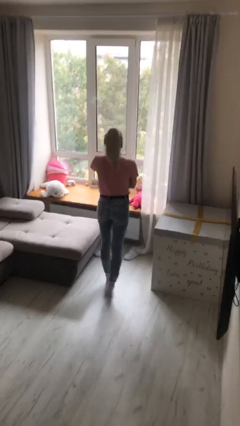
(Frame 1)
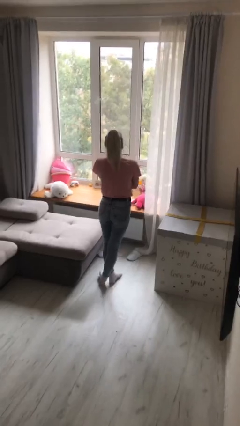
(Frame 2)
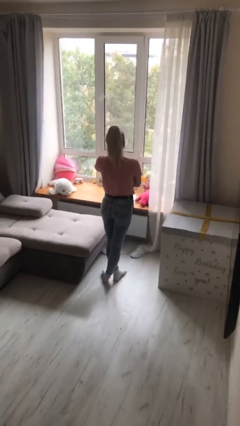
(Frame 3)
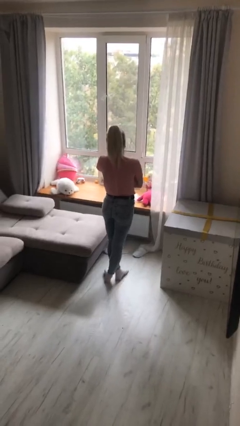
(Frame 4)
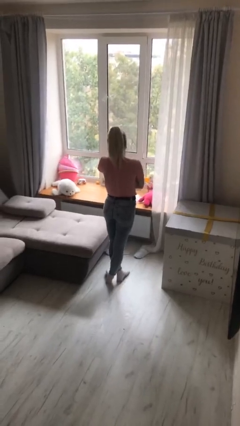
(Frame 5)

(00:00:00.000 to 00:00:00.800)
person crosses legs

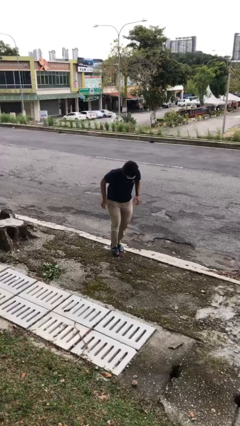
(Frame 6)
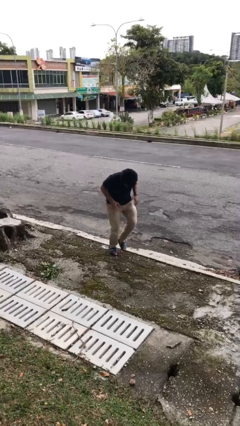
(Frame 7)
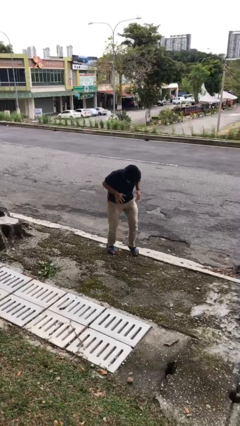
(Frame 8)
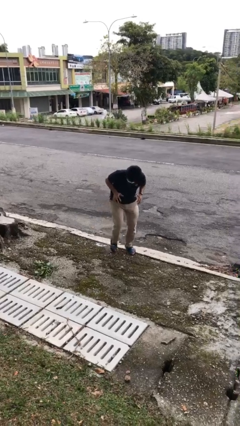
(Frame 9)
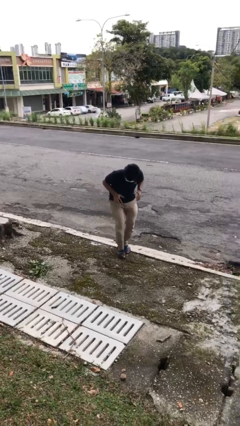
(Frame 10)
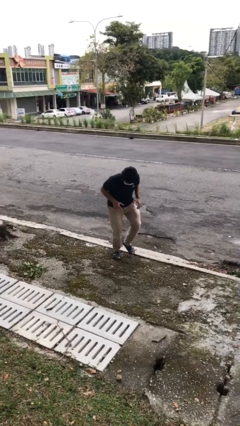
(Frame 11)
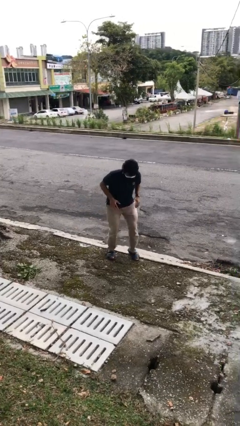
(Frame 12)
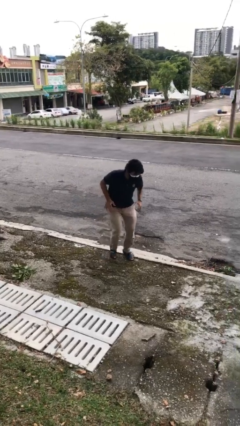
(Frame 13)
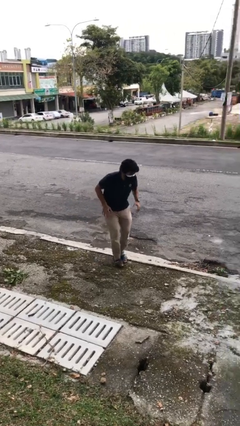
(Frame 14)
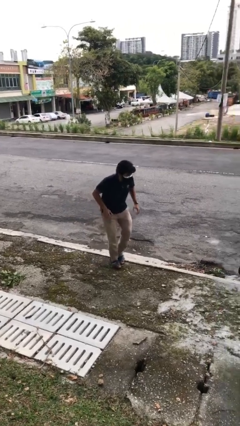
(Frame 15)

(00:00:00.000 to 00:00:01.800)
person walks tiptoe

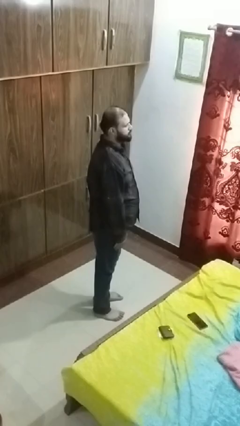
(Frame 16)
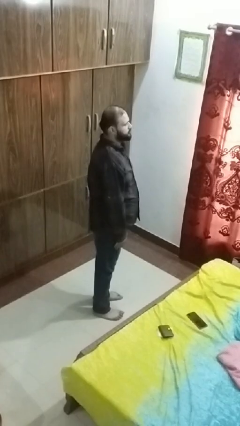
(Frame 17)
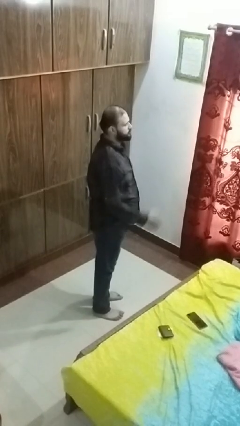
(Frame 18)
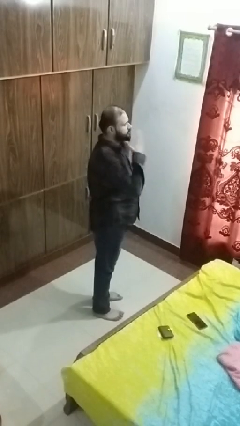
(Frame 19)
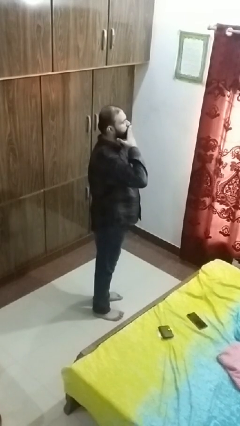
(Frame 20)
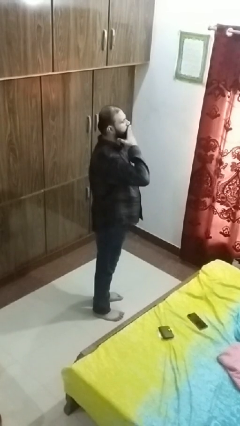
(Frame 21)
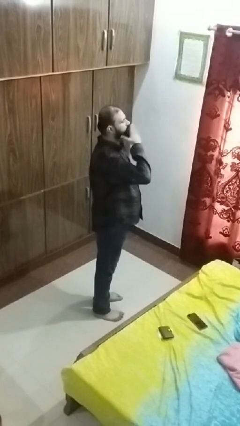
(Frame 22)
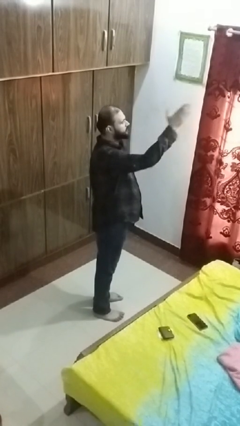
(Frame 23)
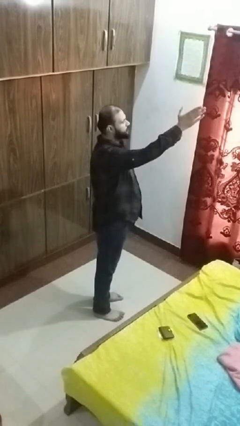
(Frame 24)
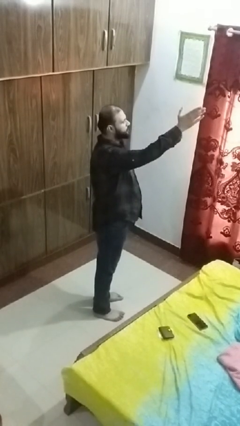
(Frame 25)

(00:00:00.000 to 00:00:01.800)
person gestures blow kiss

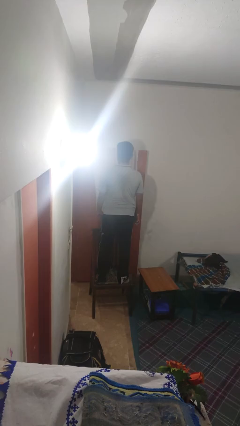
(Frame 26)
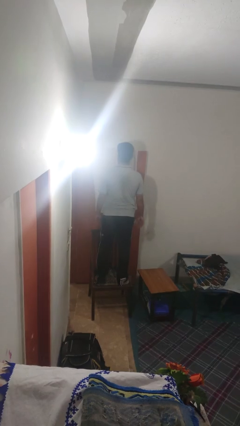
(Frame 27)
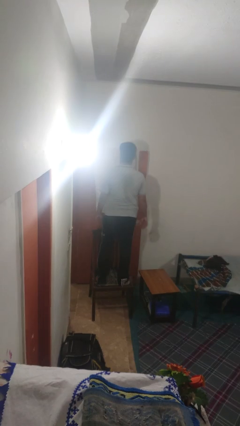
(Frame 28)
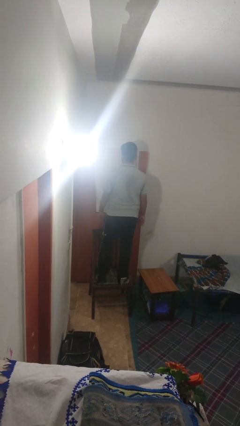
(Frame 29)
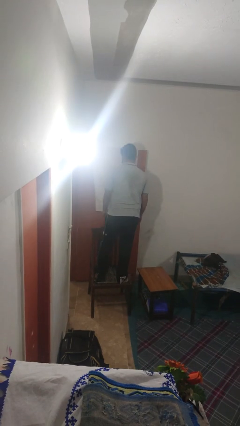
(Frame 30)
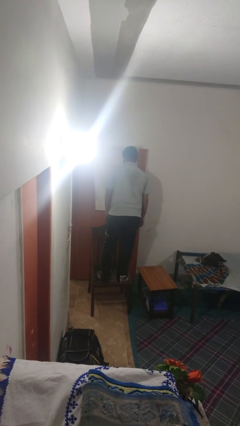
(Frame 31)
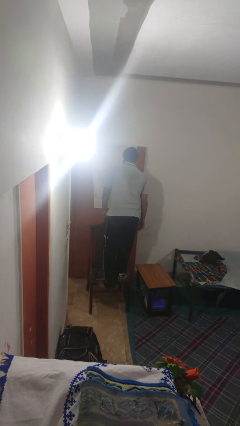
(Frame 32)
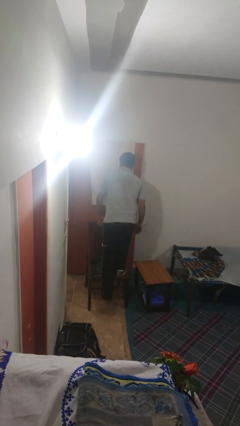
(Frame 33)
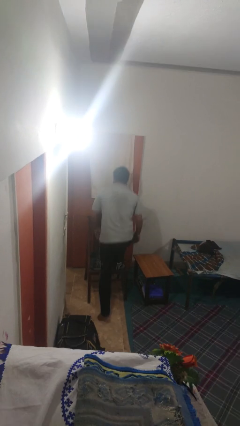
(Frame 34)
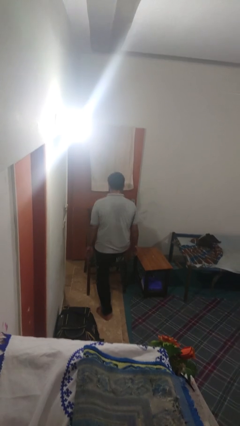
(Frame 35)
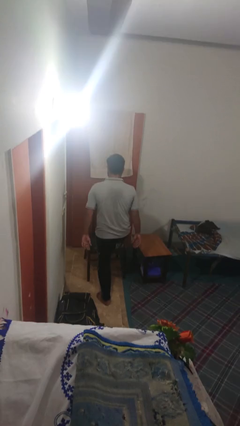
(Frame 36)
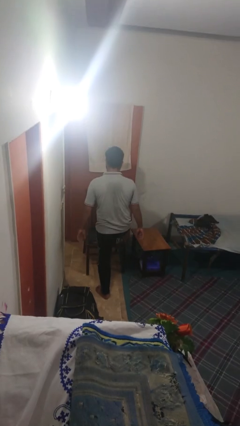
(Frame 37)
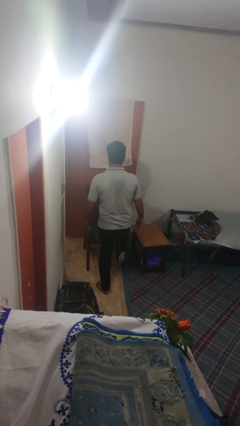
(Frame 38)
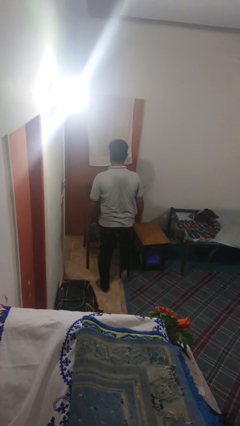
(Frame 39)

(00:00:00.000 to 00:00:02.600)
person climbs off chair

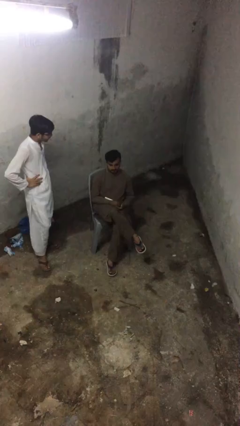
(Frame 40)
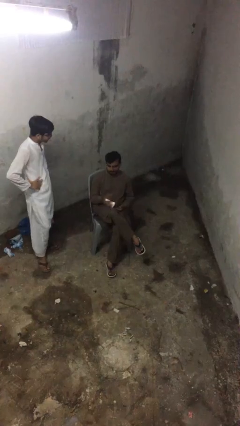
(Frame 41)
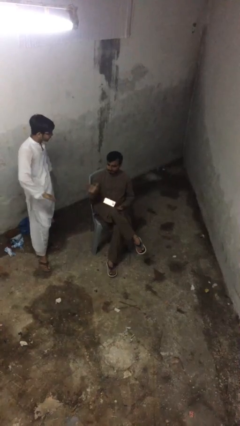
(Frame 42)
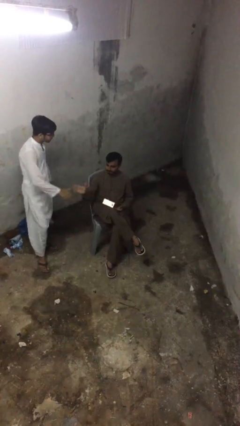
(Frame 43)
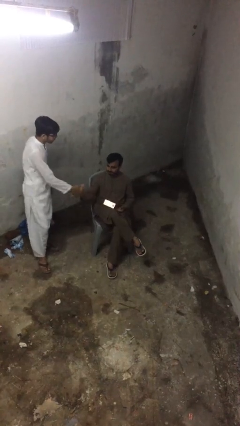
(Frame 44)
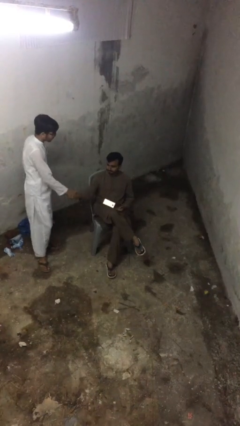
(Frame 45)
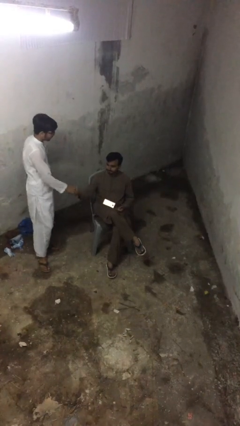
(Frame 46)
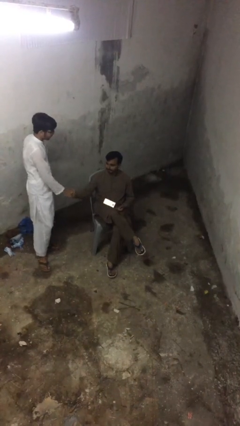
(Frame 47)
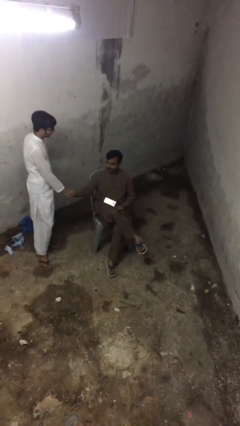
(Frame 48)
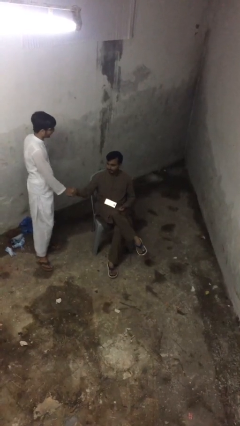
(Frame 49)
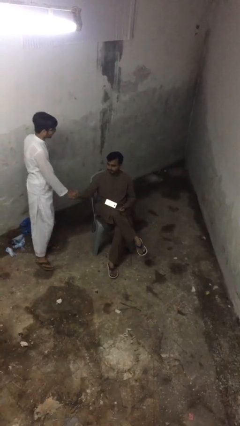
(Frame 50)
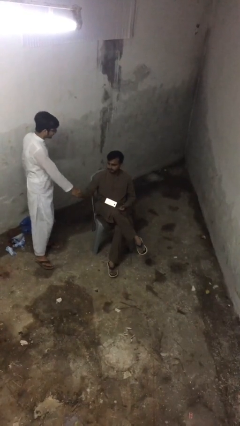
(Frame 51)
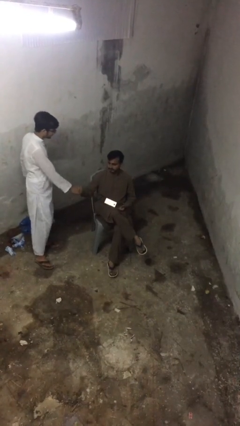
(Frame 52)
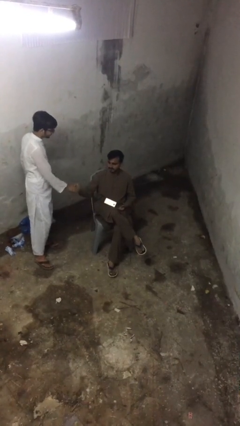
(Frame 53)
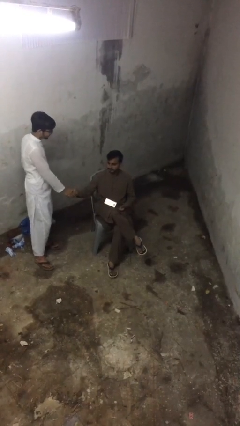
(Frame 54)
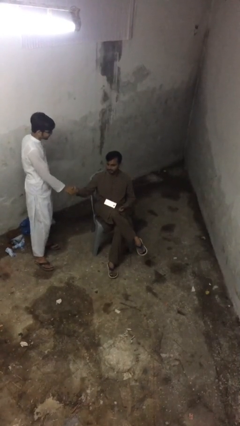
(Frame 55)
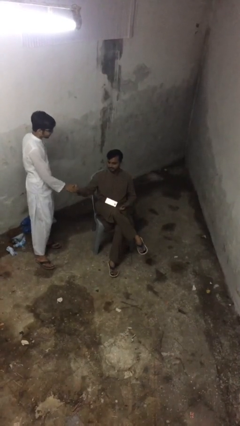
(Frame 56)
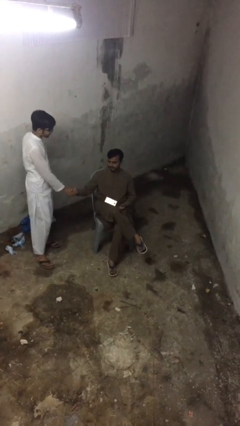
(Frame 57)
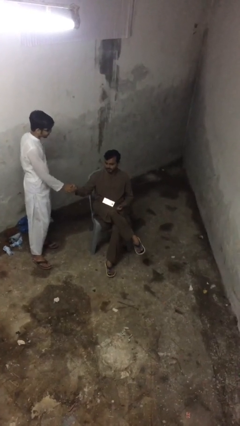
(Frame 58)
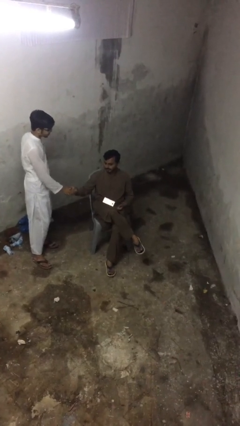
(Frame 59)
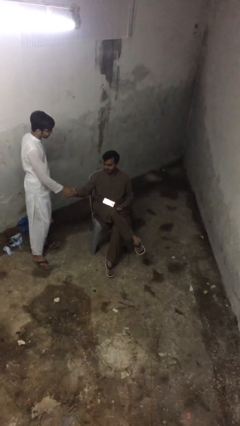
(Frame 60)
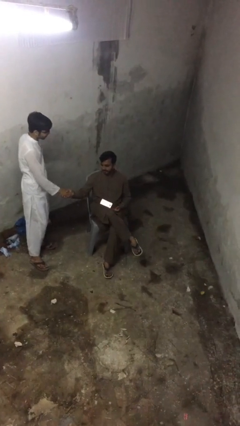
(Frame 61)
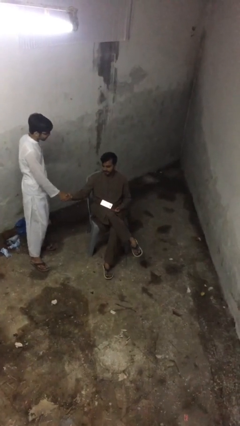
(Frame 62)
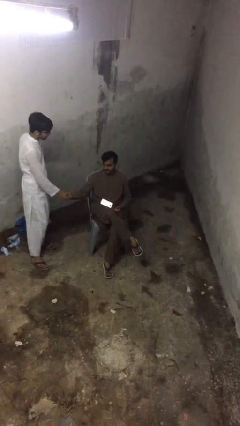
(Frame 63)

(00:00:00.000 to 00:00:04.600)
person shakes hand

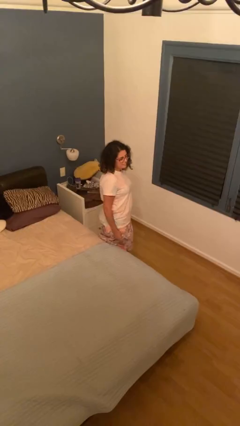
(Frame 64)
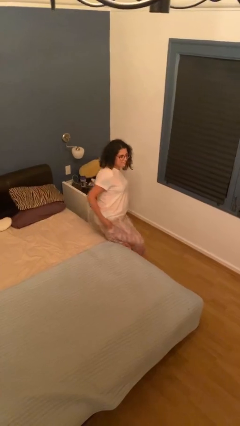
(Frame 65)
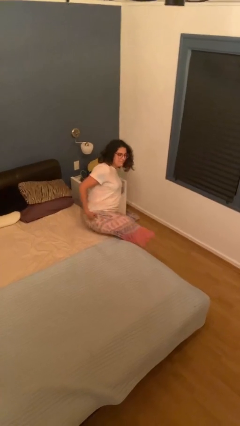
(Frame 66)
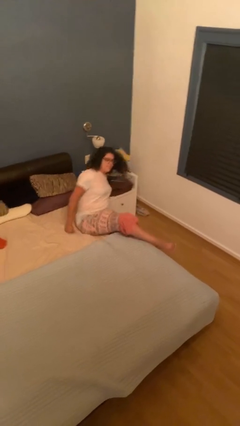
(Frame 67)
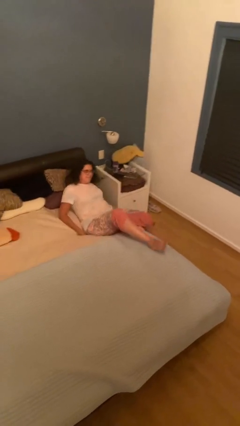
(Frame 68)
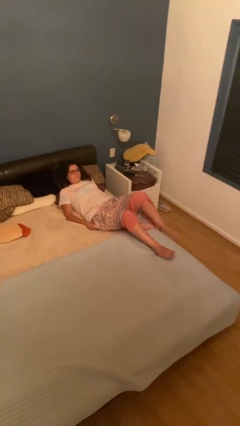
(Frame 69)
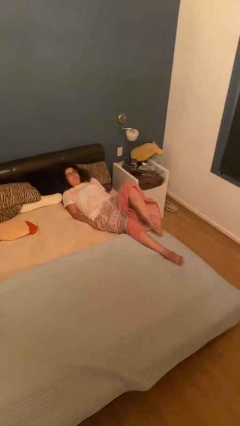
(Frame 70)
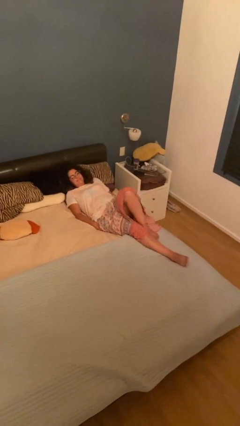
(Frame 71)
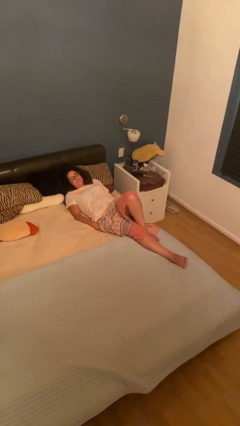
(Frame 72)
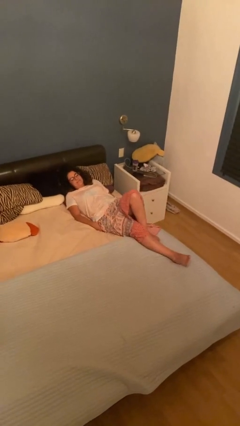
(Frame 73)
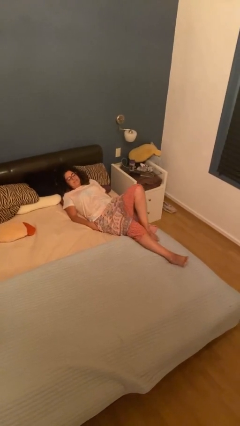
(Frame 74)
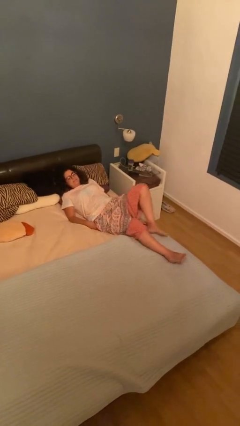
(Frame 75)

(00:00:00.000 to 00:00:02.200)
person lies down on bed

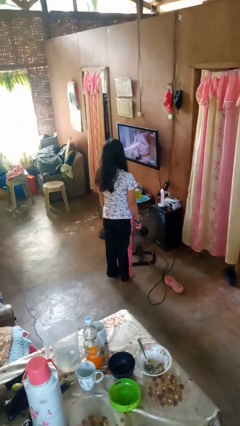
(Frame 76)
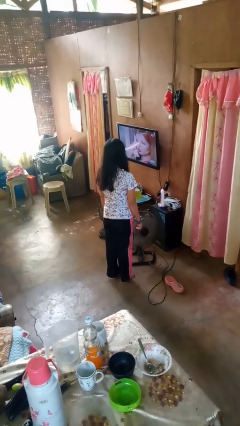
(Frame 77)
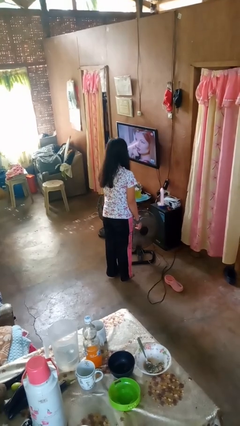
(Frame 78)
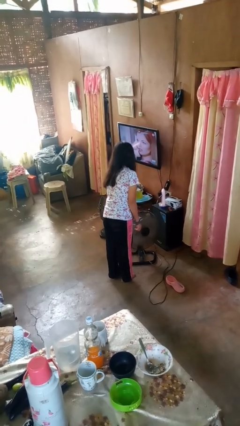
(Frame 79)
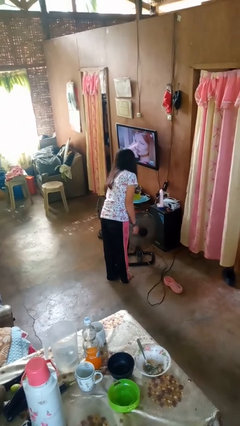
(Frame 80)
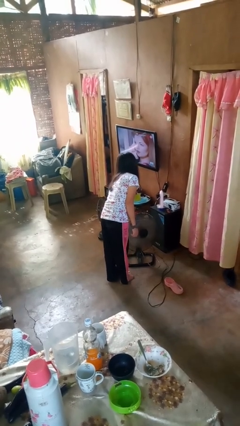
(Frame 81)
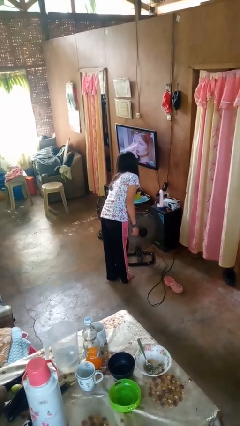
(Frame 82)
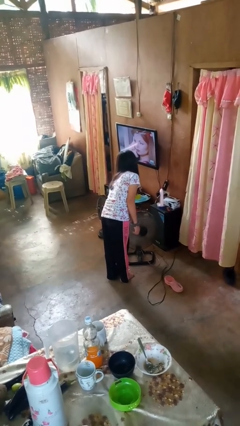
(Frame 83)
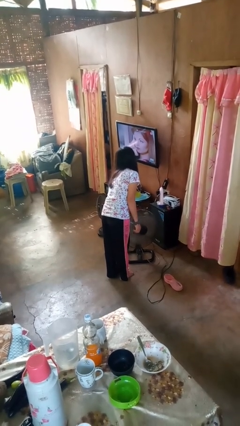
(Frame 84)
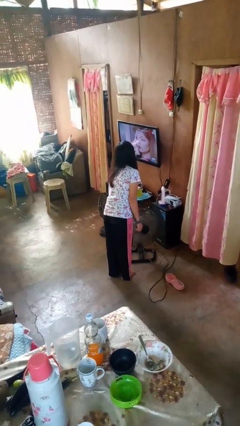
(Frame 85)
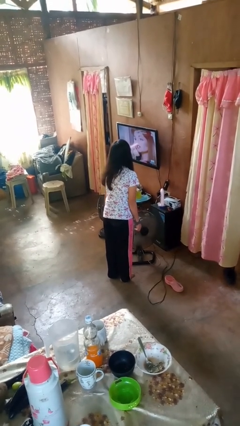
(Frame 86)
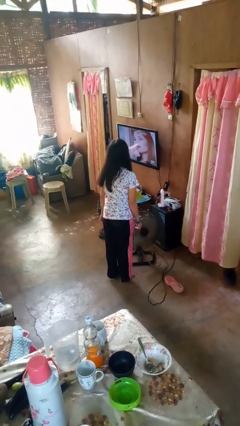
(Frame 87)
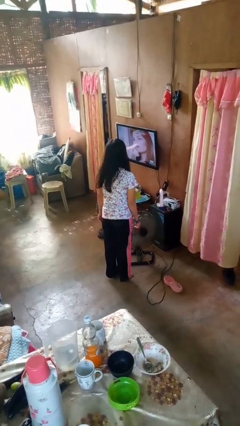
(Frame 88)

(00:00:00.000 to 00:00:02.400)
person turns off fan

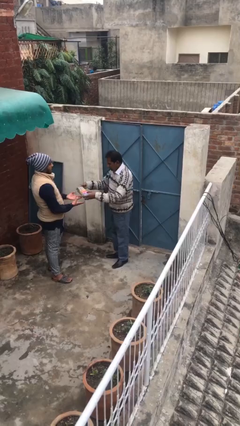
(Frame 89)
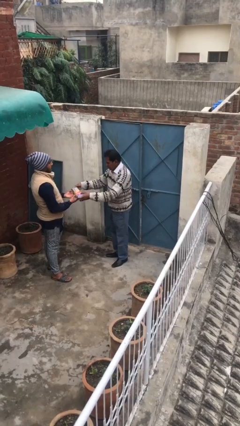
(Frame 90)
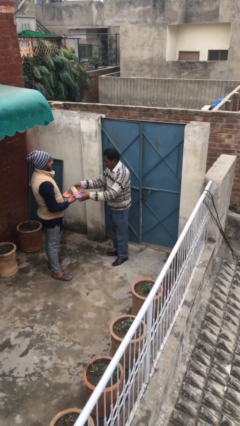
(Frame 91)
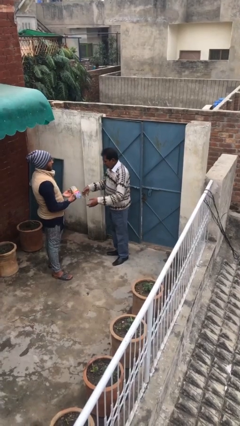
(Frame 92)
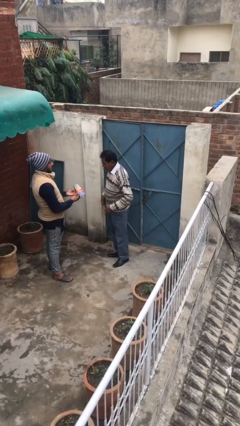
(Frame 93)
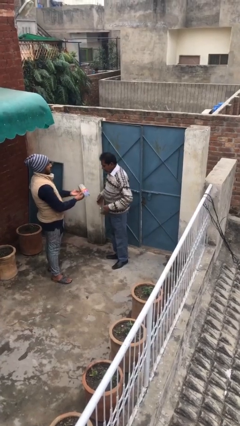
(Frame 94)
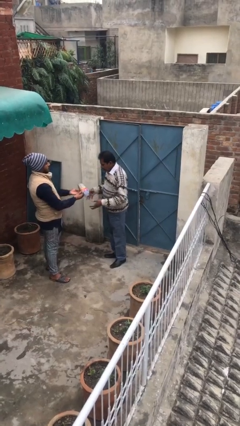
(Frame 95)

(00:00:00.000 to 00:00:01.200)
person transfers object to person
